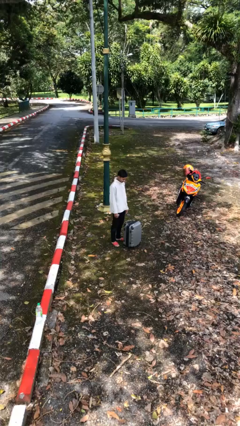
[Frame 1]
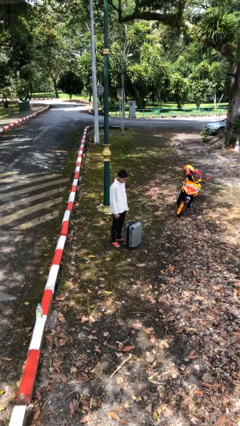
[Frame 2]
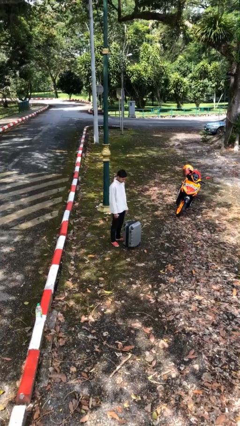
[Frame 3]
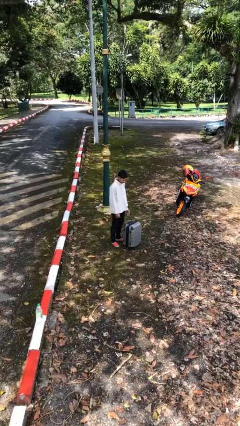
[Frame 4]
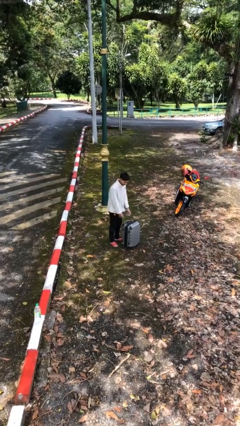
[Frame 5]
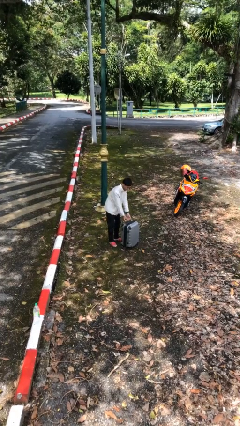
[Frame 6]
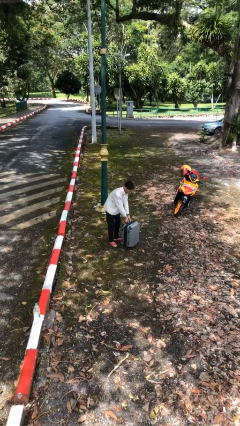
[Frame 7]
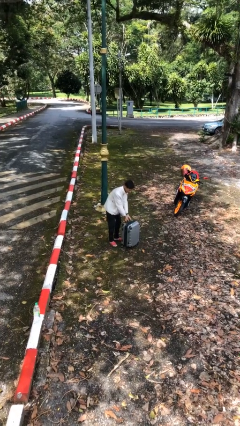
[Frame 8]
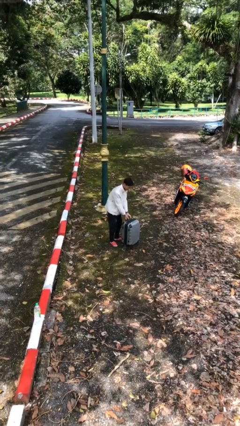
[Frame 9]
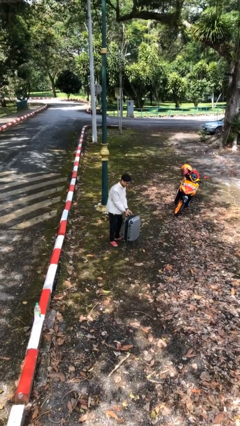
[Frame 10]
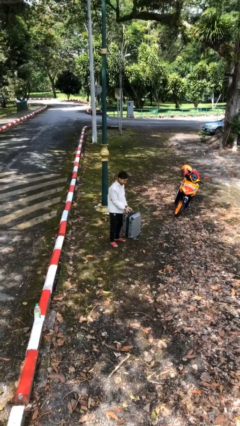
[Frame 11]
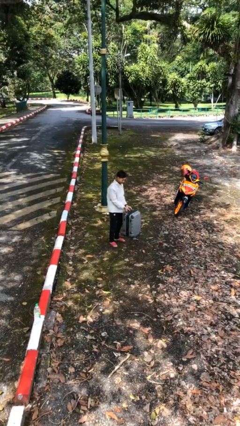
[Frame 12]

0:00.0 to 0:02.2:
person picks up object from floor

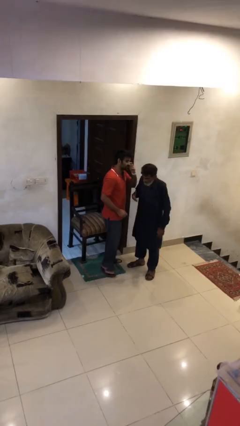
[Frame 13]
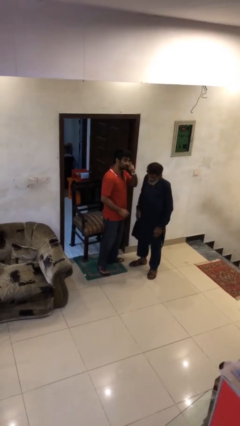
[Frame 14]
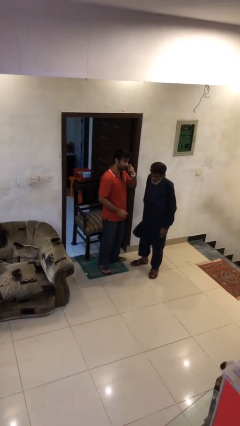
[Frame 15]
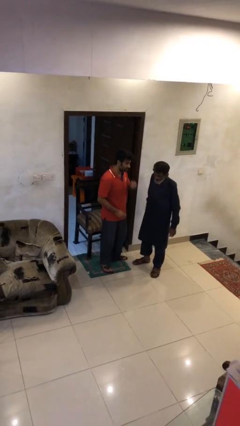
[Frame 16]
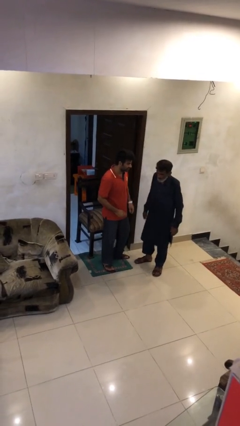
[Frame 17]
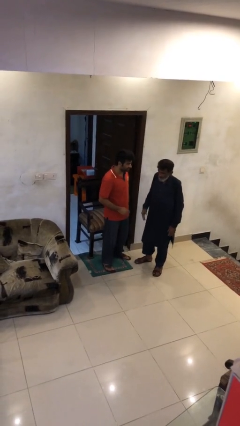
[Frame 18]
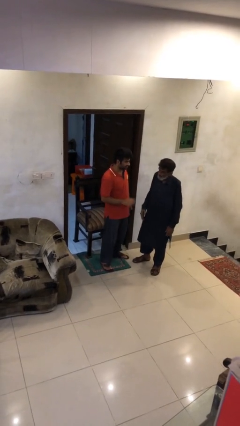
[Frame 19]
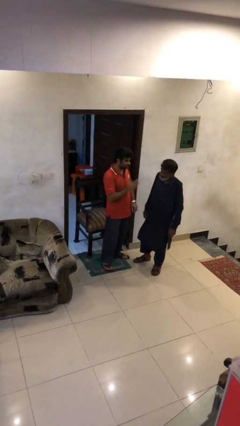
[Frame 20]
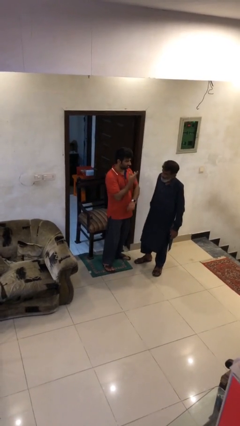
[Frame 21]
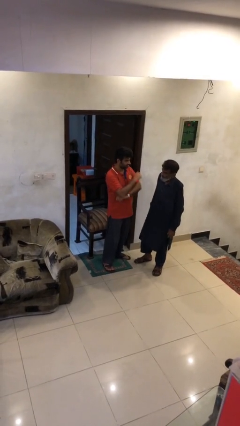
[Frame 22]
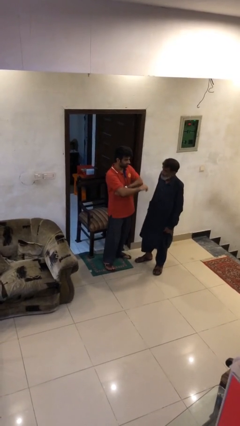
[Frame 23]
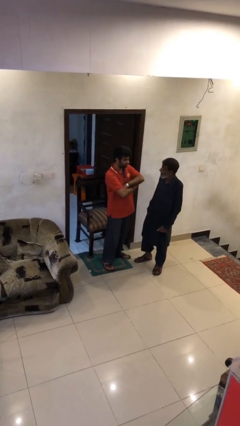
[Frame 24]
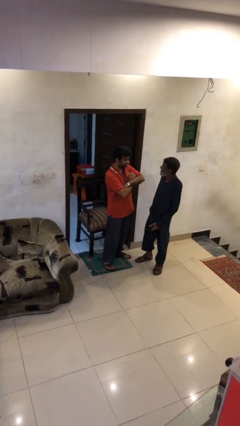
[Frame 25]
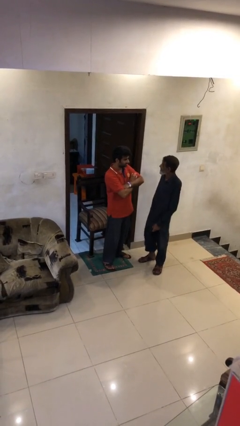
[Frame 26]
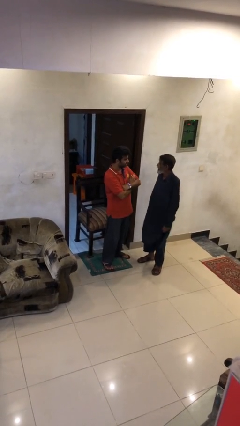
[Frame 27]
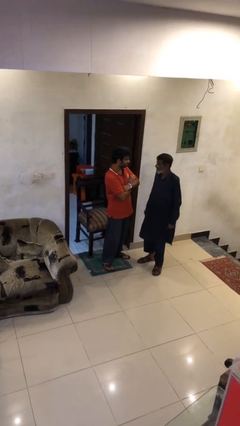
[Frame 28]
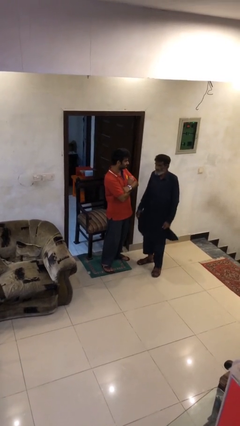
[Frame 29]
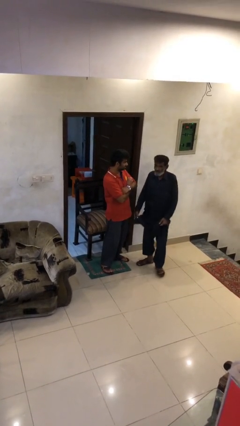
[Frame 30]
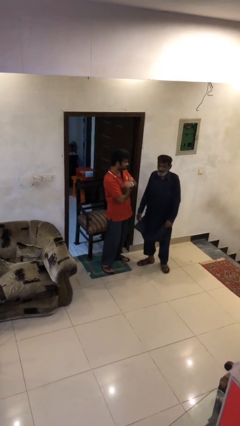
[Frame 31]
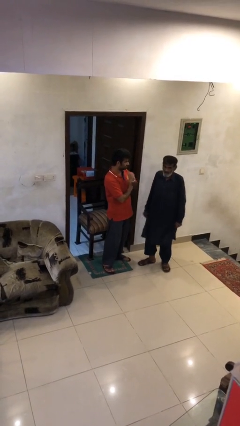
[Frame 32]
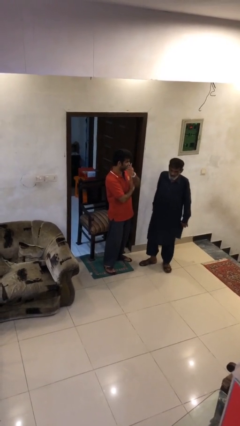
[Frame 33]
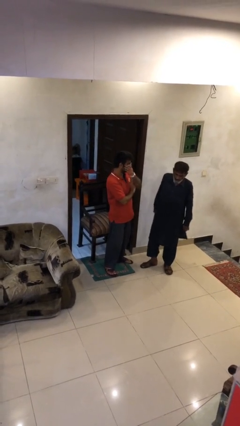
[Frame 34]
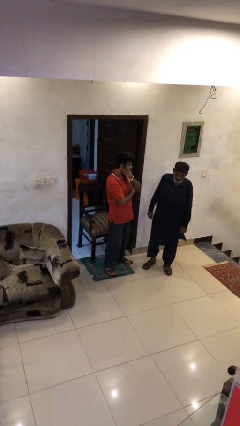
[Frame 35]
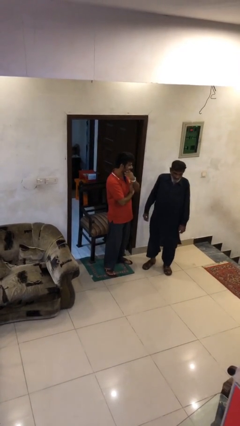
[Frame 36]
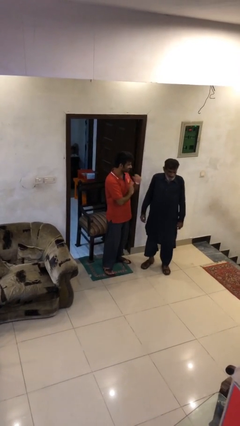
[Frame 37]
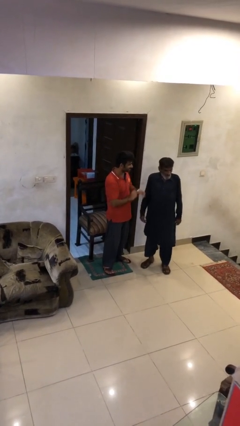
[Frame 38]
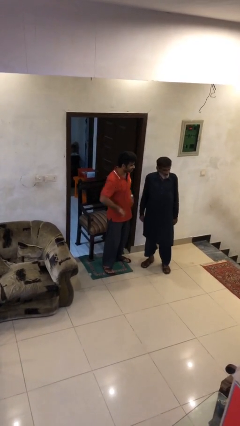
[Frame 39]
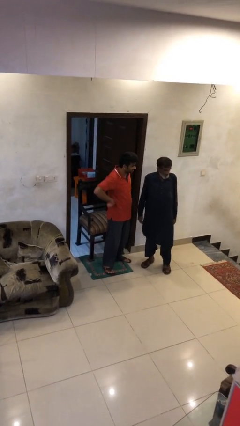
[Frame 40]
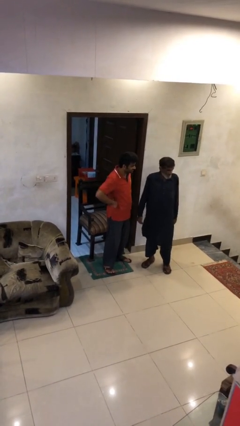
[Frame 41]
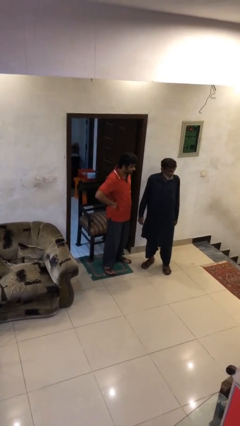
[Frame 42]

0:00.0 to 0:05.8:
person talks to person

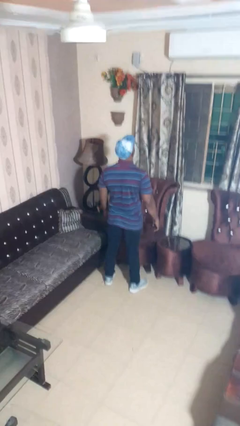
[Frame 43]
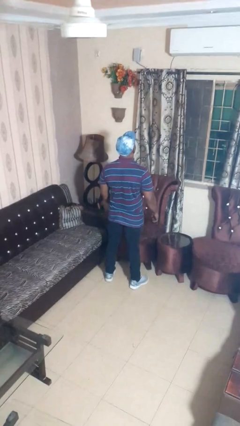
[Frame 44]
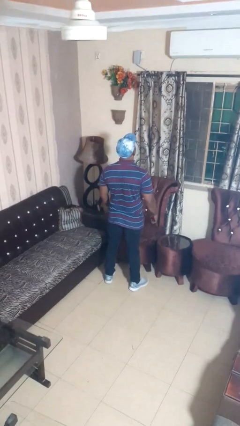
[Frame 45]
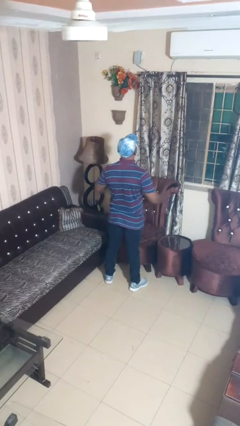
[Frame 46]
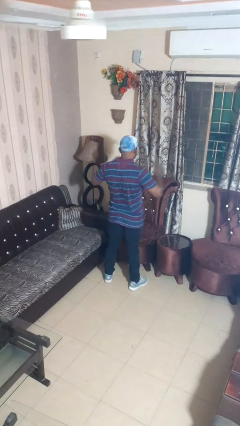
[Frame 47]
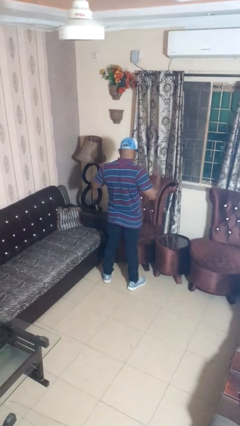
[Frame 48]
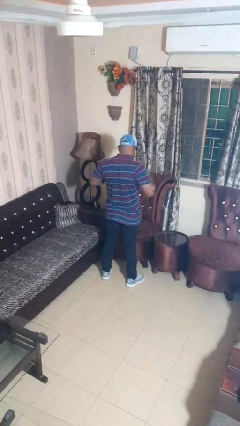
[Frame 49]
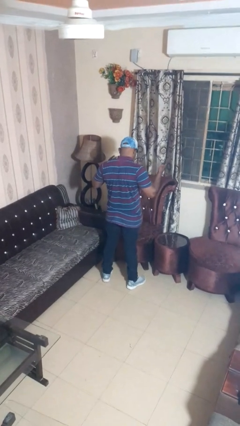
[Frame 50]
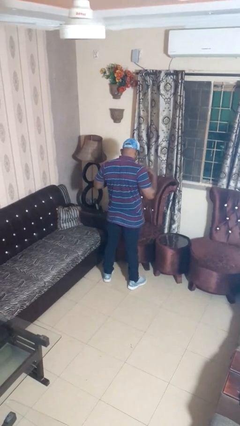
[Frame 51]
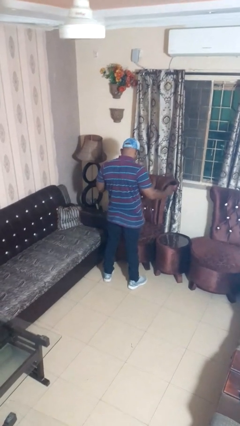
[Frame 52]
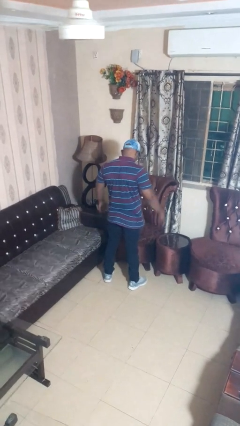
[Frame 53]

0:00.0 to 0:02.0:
person drums on chest

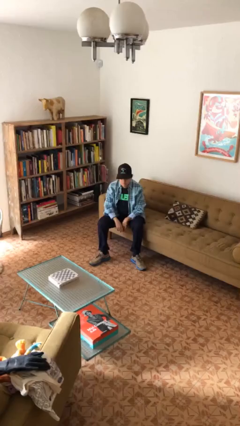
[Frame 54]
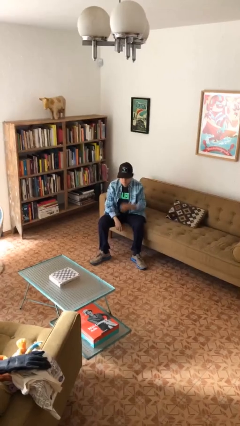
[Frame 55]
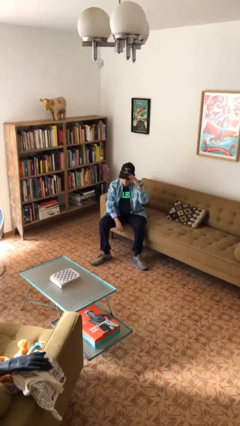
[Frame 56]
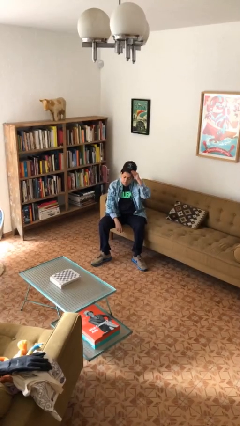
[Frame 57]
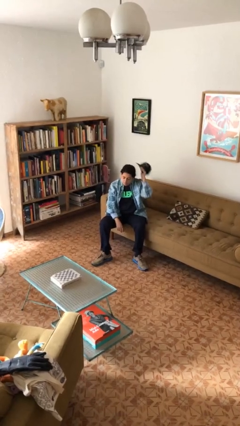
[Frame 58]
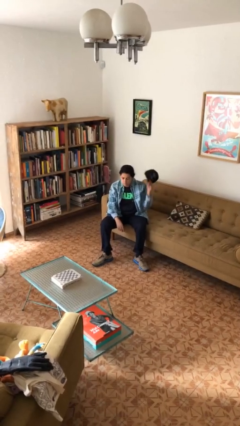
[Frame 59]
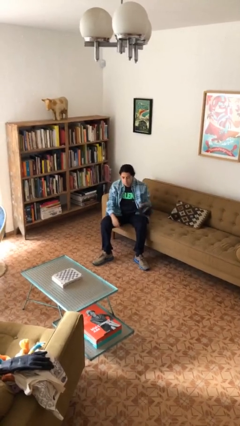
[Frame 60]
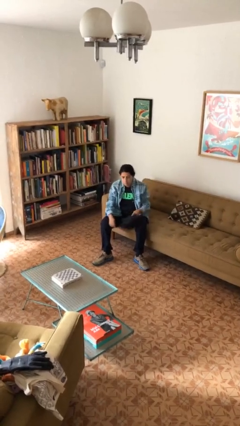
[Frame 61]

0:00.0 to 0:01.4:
person takes off hat

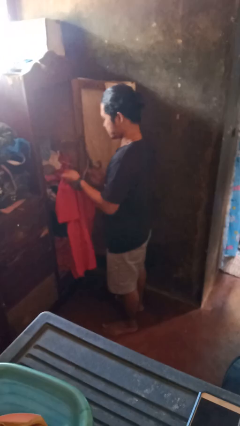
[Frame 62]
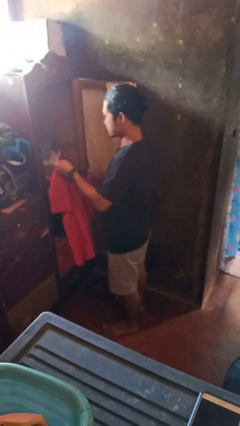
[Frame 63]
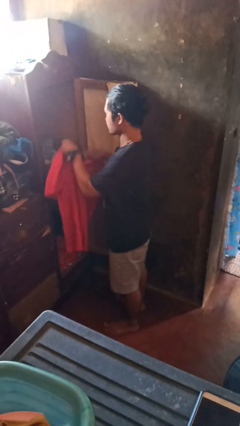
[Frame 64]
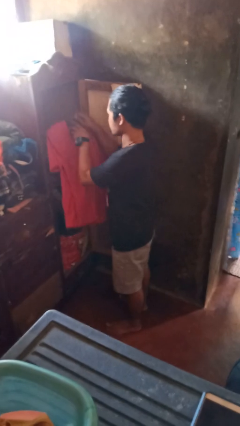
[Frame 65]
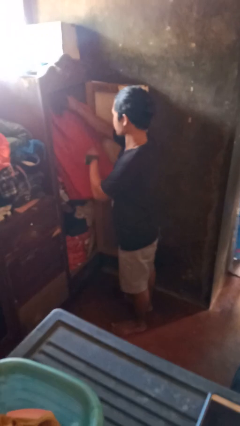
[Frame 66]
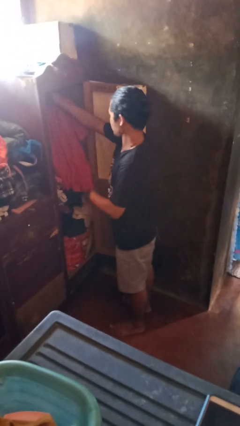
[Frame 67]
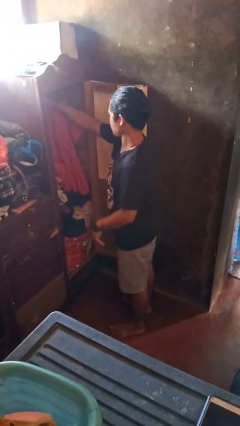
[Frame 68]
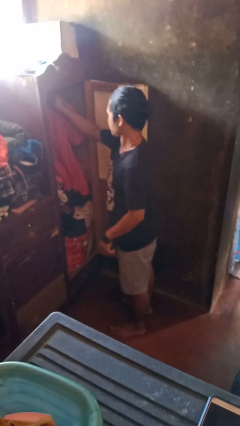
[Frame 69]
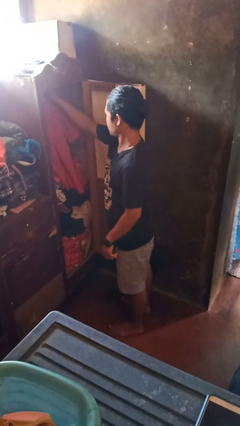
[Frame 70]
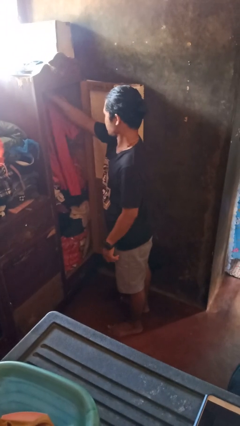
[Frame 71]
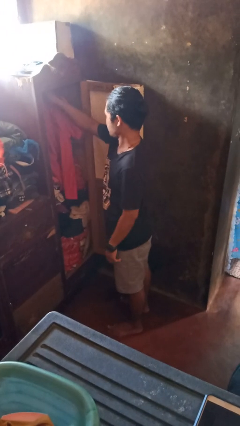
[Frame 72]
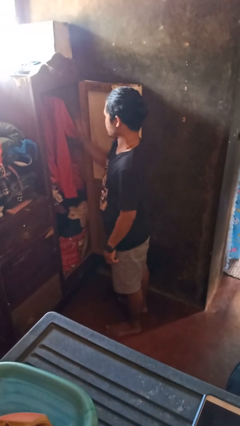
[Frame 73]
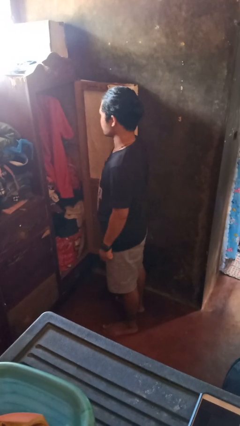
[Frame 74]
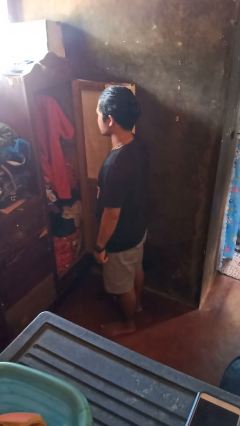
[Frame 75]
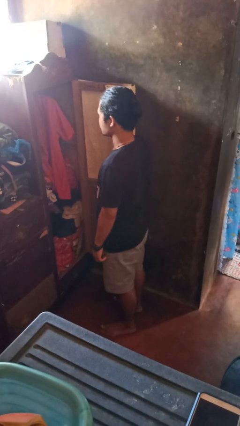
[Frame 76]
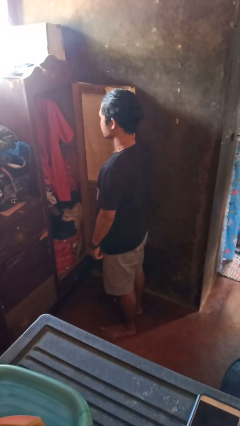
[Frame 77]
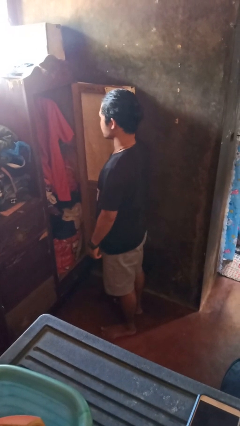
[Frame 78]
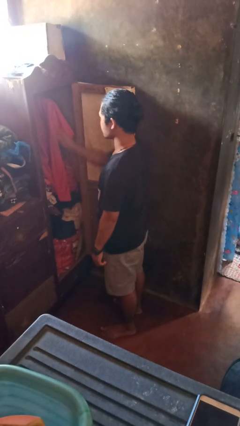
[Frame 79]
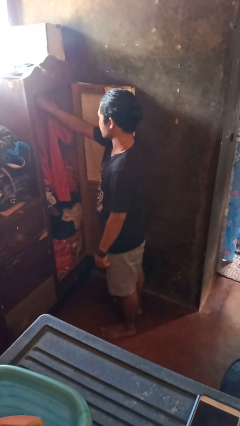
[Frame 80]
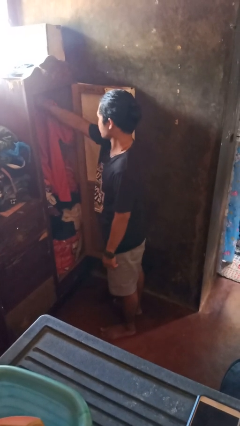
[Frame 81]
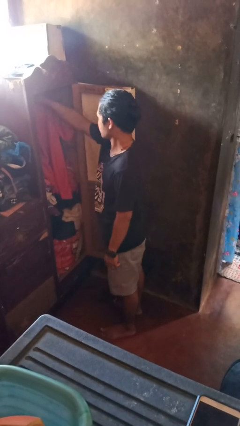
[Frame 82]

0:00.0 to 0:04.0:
person puts clothes into closet

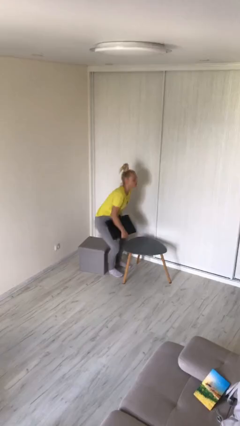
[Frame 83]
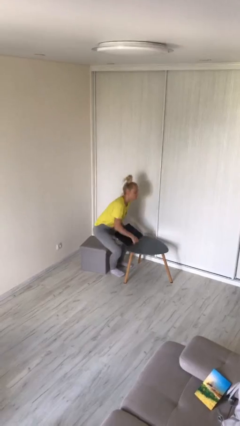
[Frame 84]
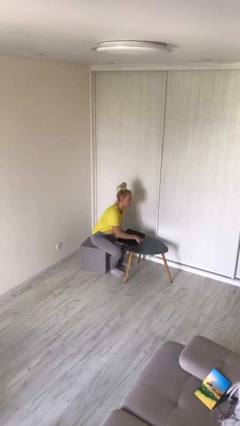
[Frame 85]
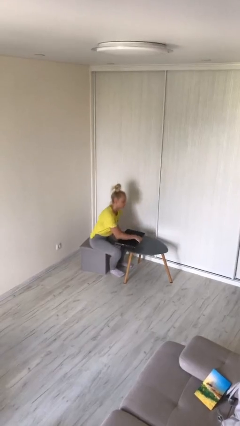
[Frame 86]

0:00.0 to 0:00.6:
person sits down

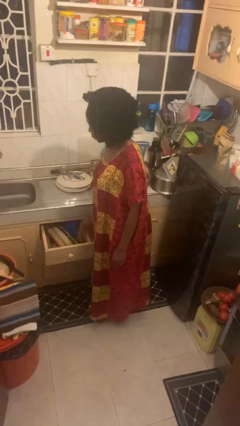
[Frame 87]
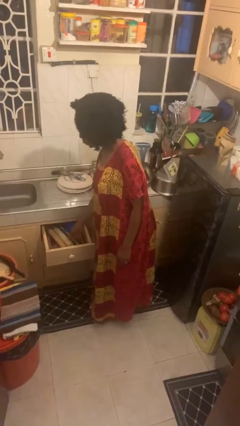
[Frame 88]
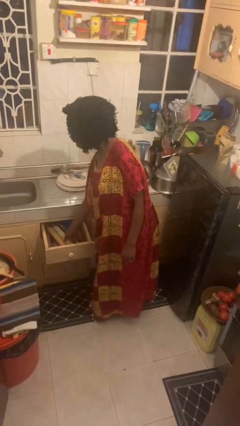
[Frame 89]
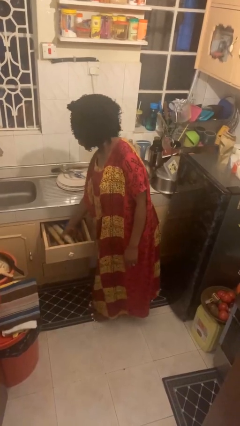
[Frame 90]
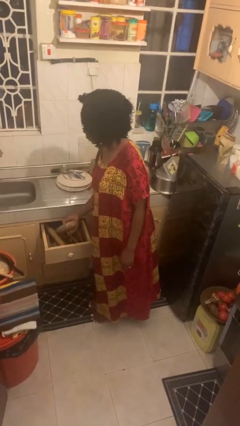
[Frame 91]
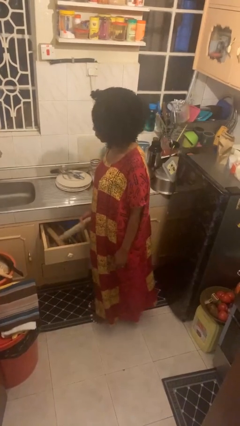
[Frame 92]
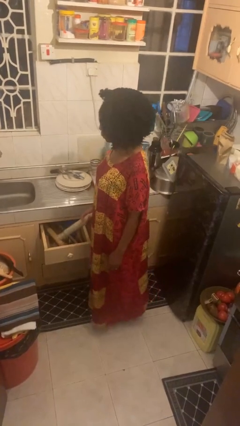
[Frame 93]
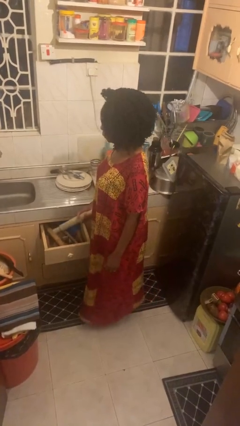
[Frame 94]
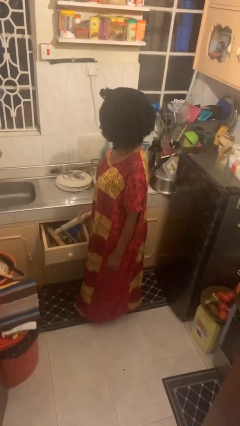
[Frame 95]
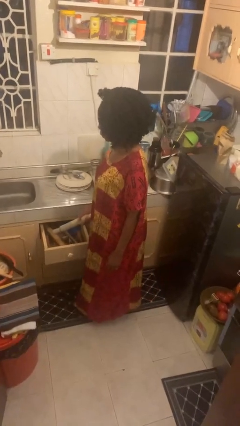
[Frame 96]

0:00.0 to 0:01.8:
person takes object from kitchen drawer
